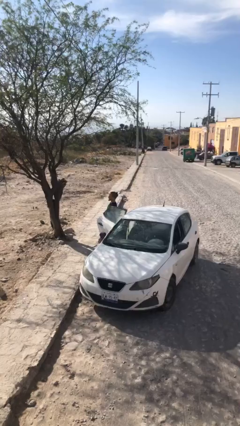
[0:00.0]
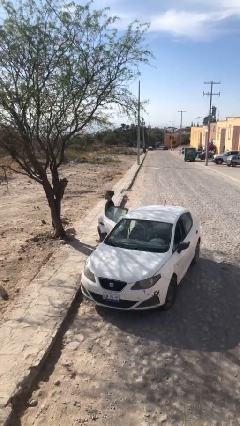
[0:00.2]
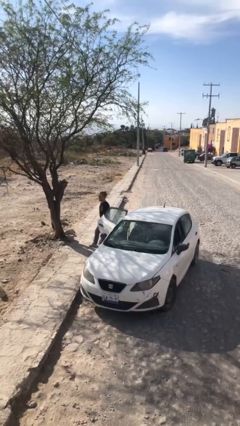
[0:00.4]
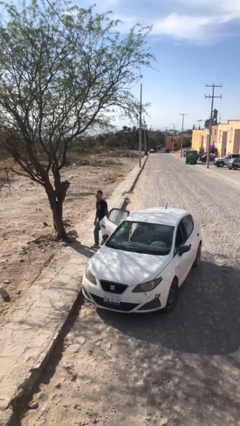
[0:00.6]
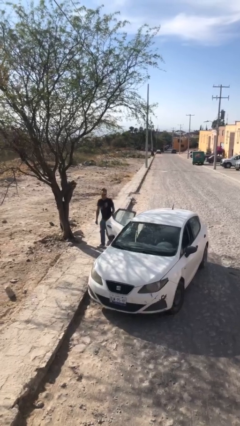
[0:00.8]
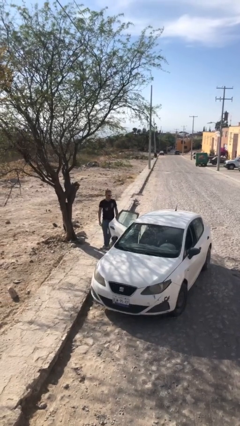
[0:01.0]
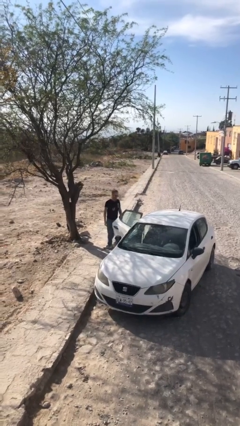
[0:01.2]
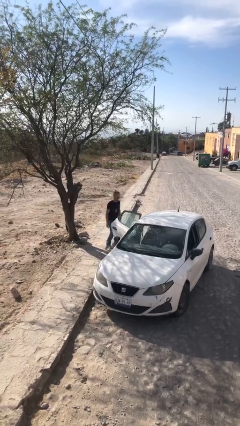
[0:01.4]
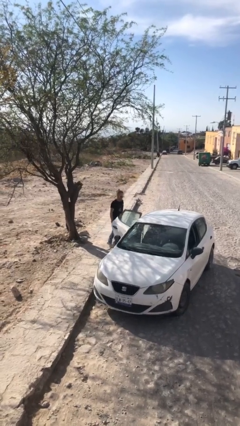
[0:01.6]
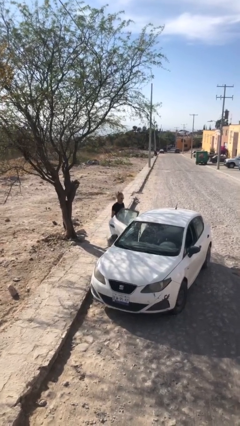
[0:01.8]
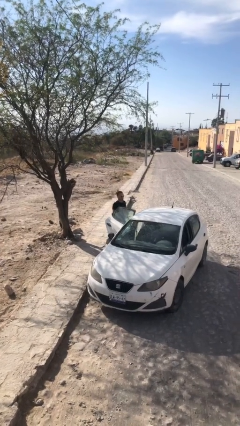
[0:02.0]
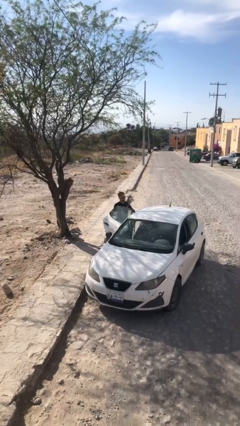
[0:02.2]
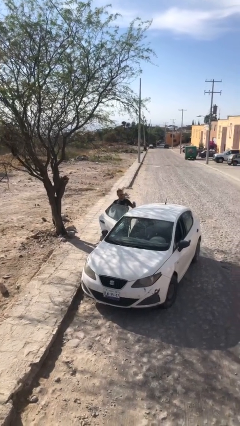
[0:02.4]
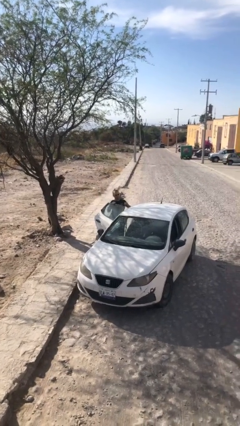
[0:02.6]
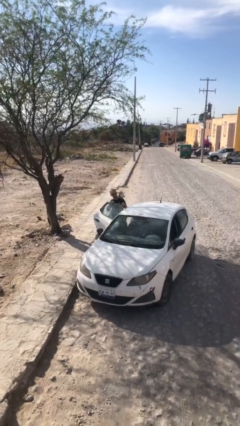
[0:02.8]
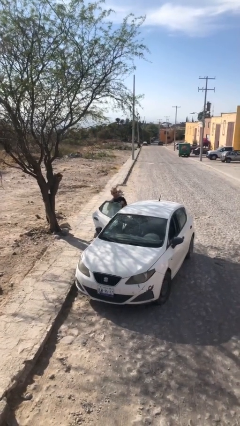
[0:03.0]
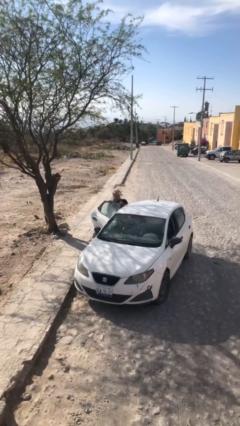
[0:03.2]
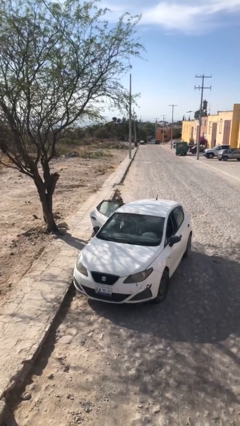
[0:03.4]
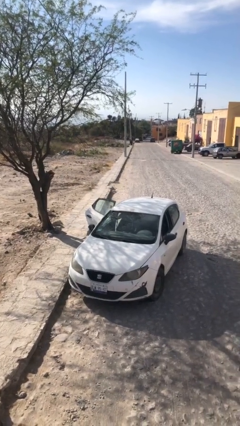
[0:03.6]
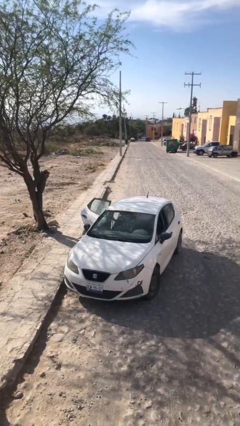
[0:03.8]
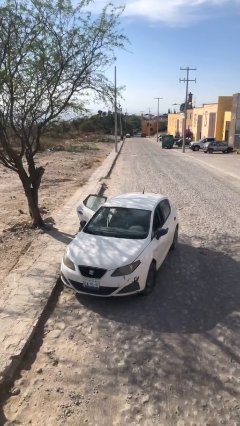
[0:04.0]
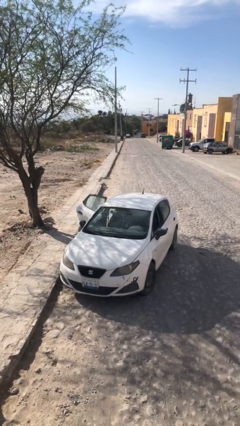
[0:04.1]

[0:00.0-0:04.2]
person enters car

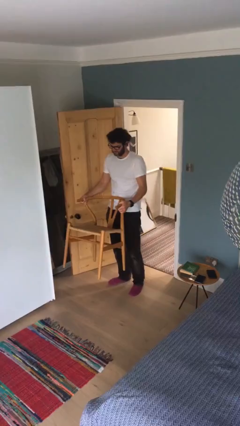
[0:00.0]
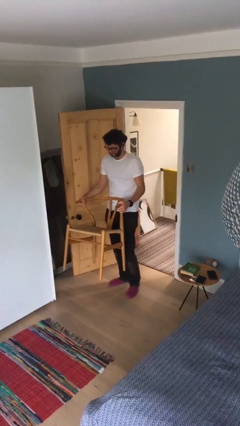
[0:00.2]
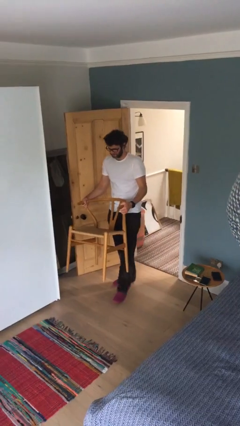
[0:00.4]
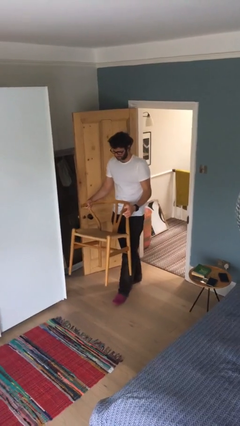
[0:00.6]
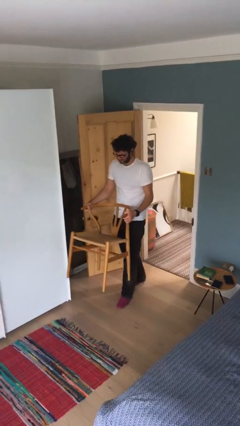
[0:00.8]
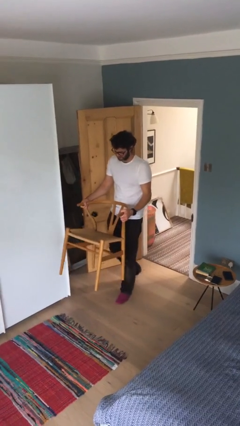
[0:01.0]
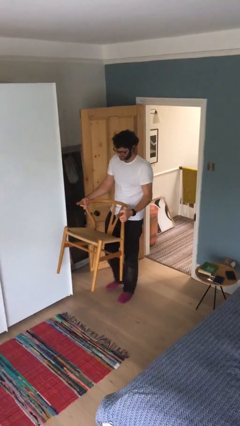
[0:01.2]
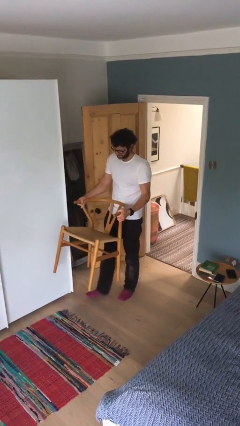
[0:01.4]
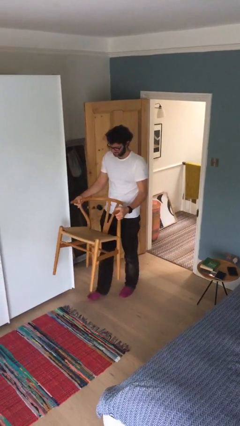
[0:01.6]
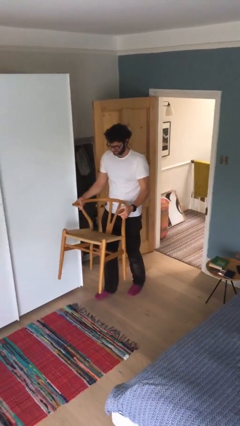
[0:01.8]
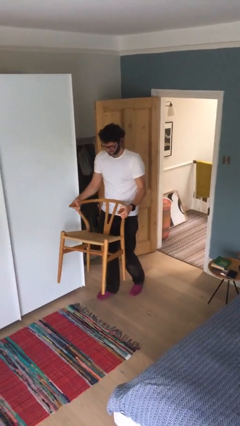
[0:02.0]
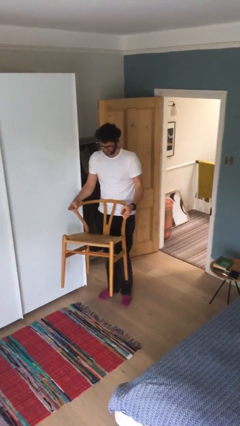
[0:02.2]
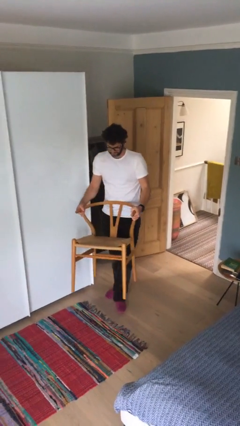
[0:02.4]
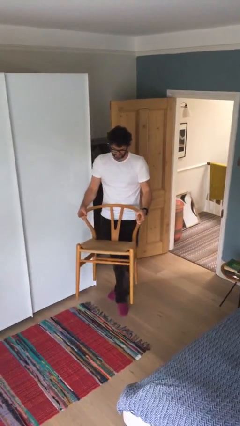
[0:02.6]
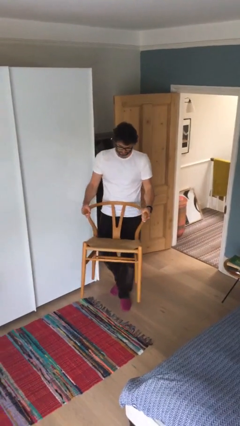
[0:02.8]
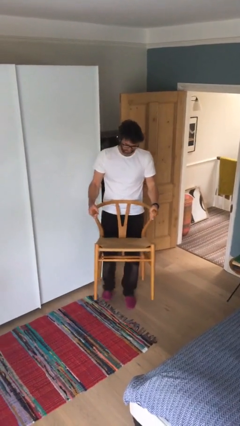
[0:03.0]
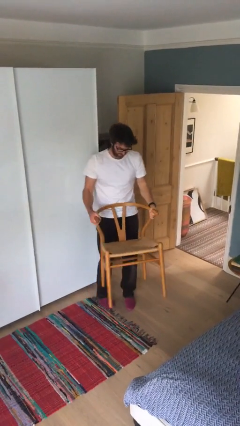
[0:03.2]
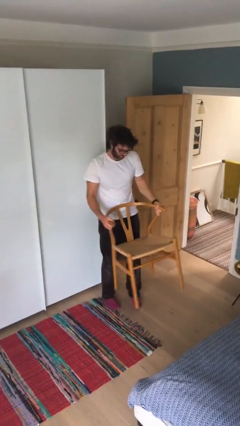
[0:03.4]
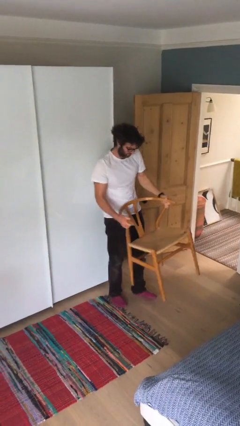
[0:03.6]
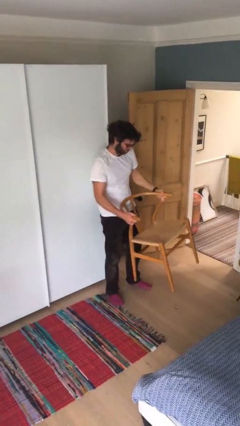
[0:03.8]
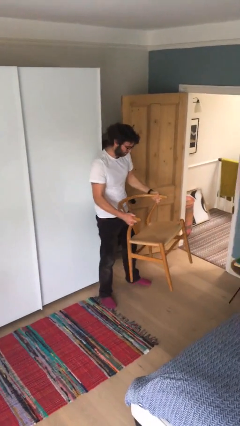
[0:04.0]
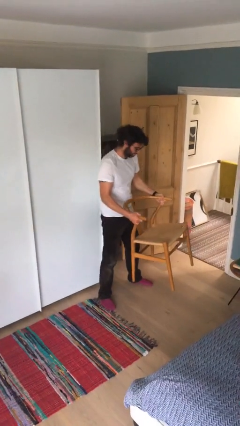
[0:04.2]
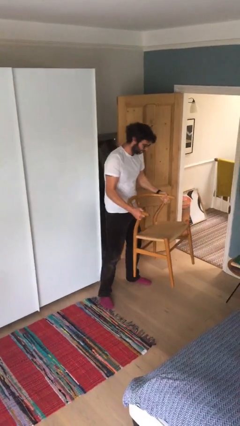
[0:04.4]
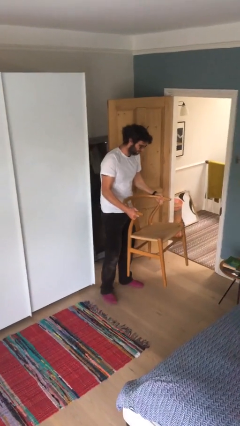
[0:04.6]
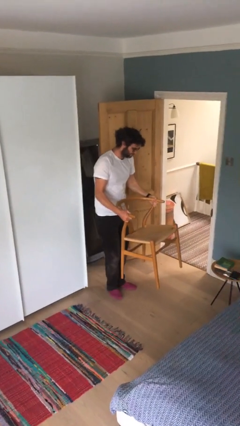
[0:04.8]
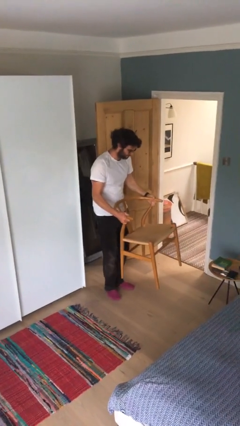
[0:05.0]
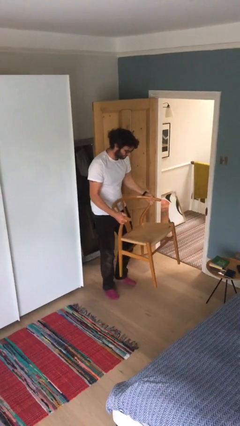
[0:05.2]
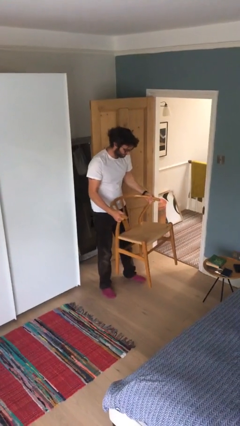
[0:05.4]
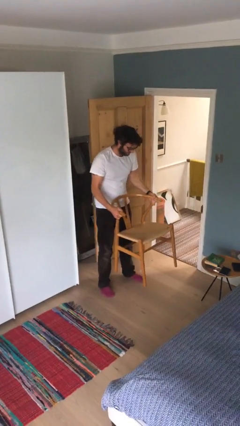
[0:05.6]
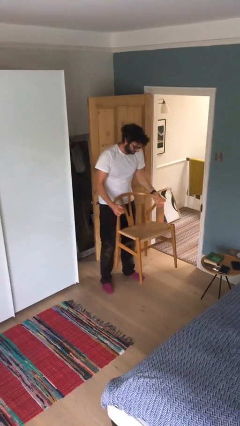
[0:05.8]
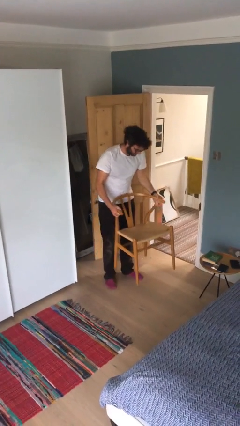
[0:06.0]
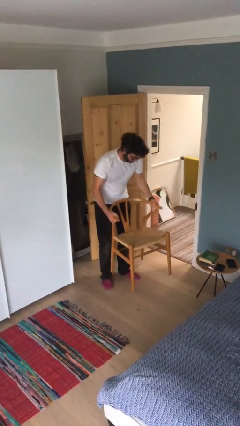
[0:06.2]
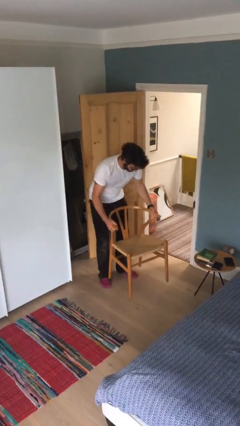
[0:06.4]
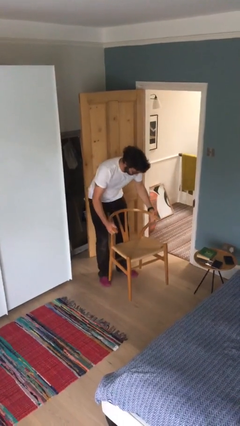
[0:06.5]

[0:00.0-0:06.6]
person carries heavy object

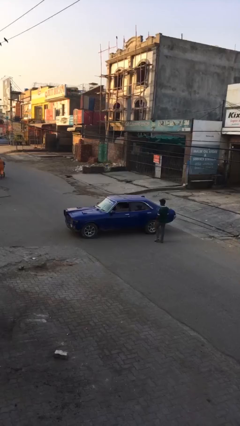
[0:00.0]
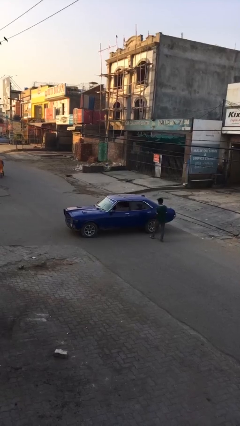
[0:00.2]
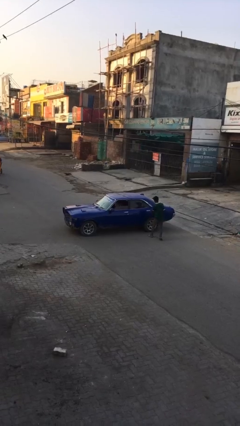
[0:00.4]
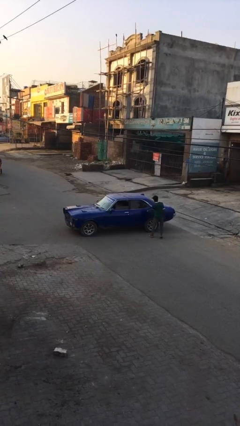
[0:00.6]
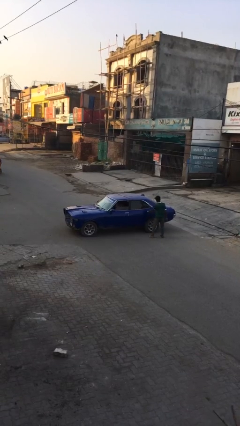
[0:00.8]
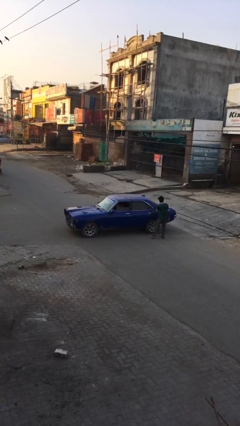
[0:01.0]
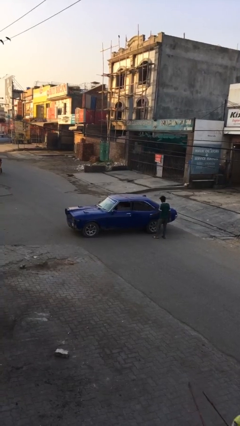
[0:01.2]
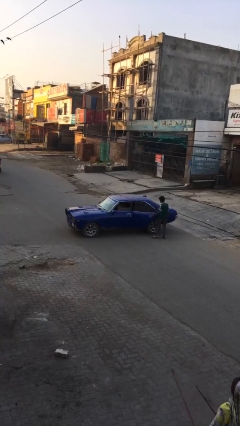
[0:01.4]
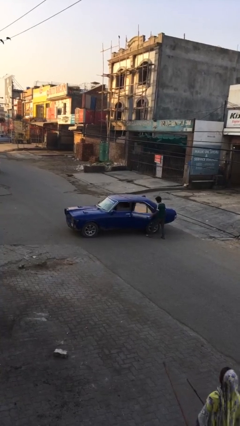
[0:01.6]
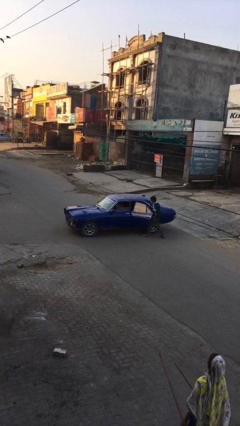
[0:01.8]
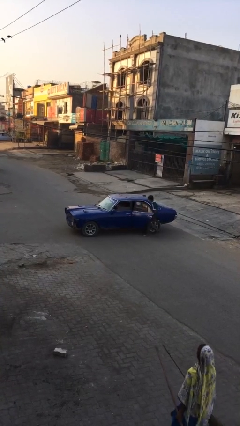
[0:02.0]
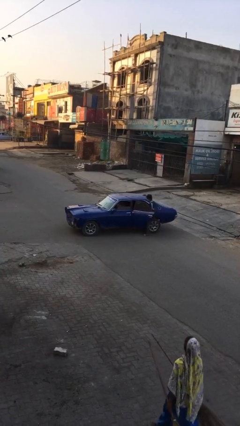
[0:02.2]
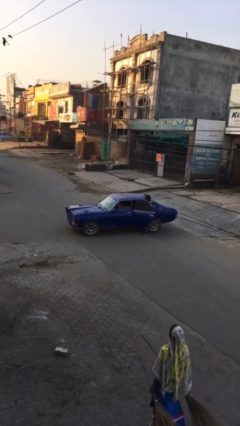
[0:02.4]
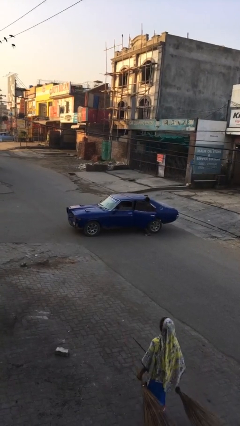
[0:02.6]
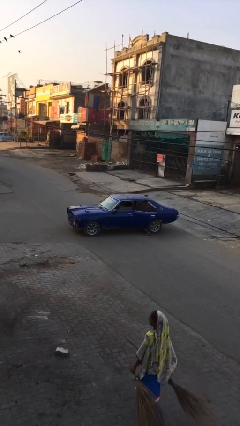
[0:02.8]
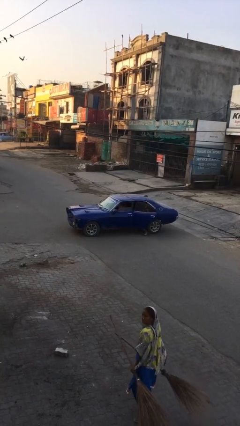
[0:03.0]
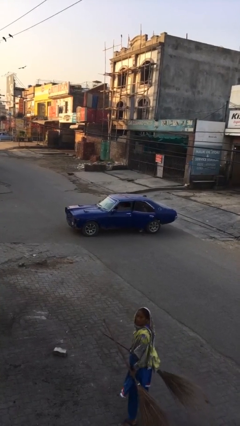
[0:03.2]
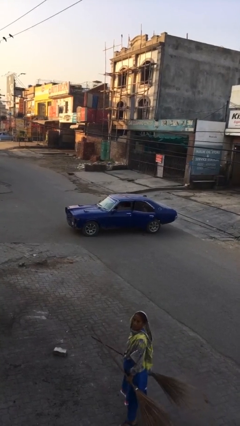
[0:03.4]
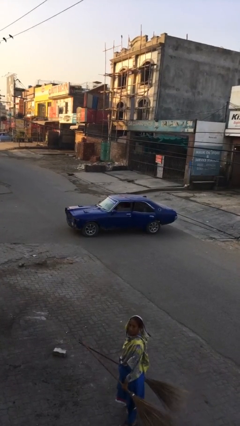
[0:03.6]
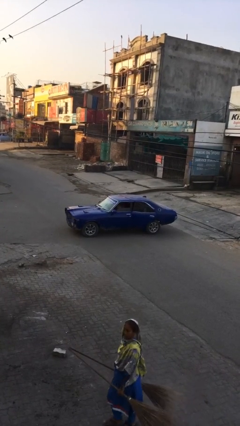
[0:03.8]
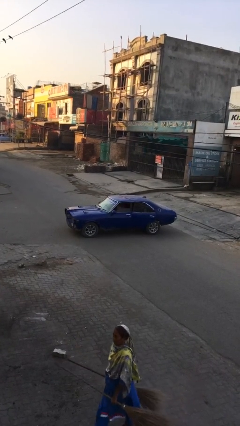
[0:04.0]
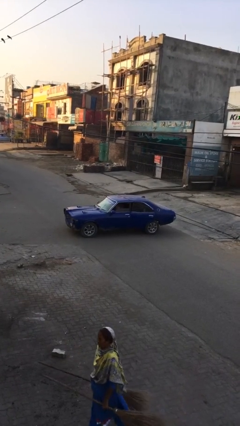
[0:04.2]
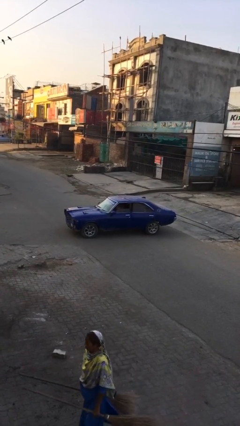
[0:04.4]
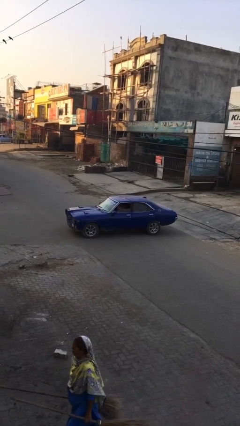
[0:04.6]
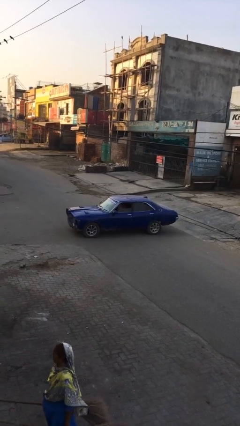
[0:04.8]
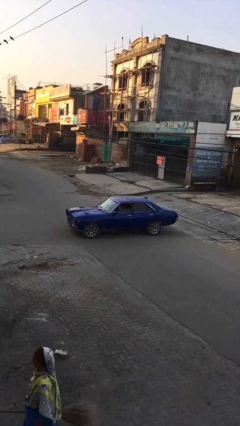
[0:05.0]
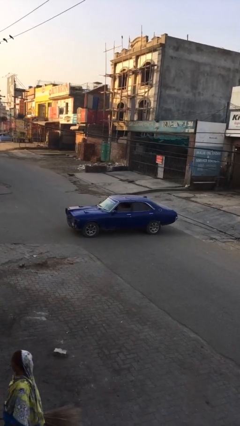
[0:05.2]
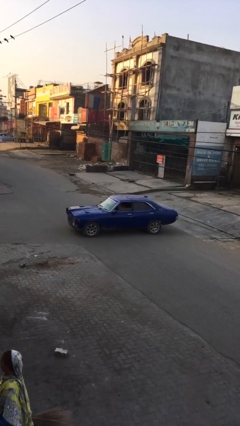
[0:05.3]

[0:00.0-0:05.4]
car picks up person

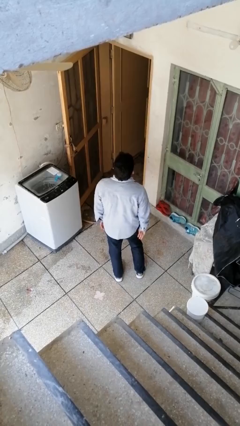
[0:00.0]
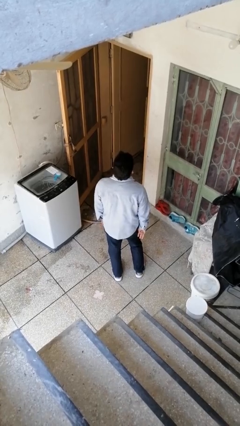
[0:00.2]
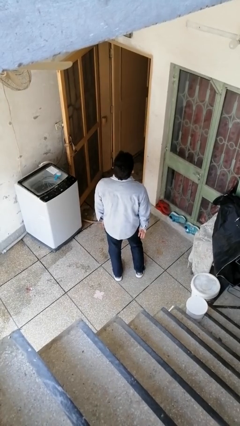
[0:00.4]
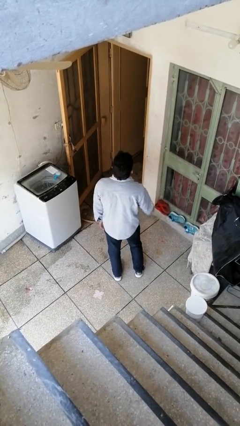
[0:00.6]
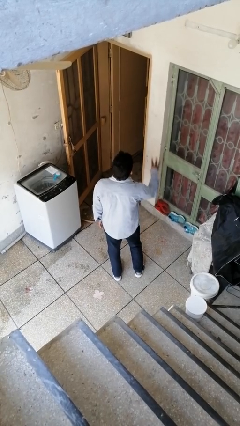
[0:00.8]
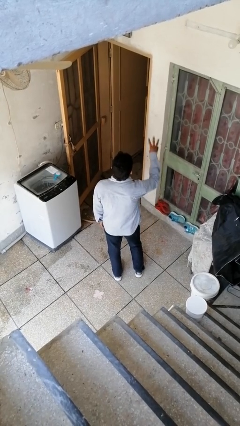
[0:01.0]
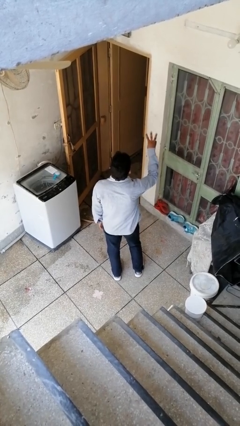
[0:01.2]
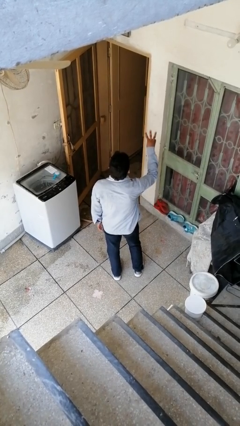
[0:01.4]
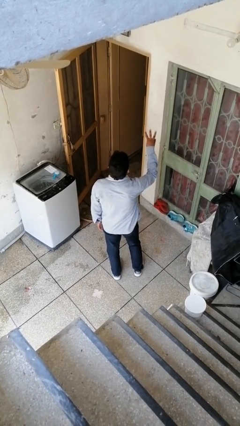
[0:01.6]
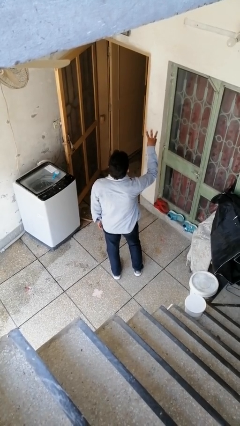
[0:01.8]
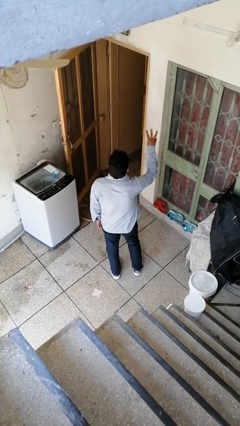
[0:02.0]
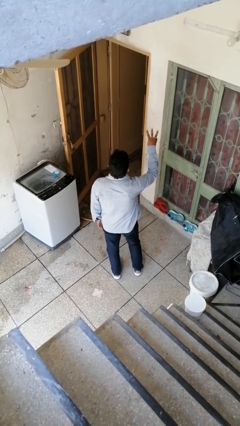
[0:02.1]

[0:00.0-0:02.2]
person gestures number three
